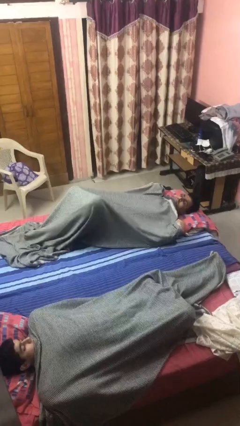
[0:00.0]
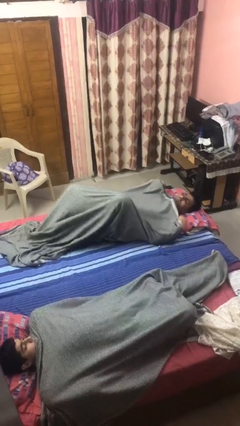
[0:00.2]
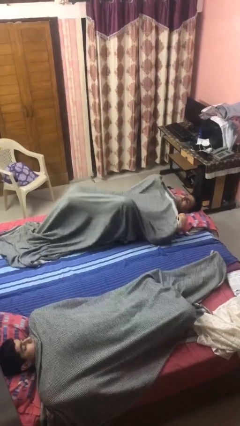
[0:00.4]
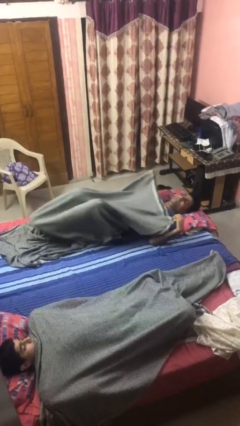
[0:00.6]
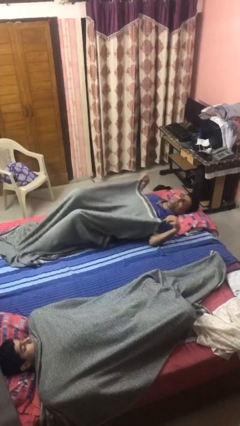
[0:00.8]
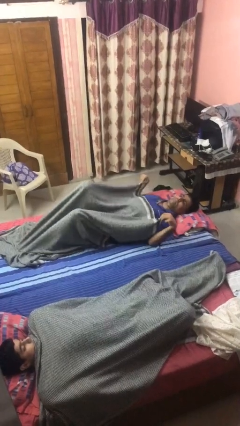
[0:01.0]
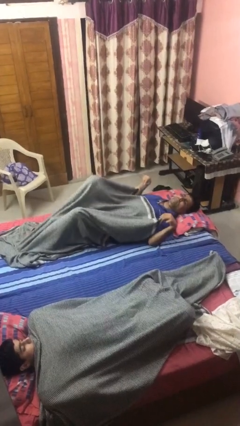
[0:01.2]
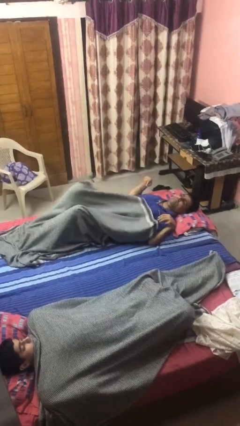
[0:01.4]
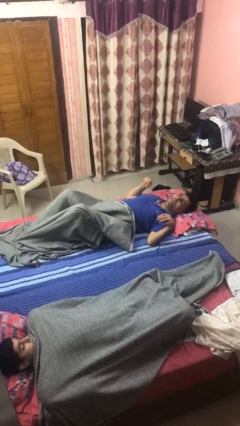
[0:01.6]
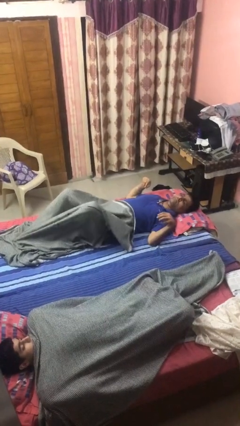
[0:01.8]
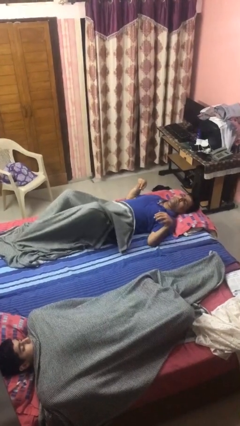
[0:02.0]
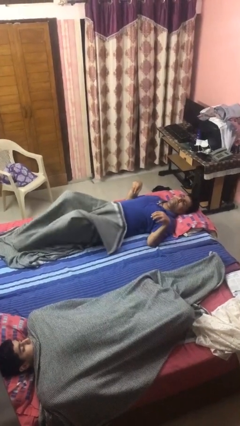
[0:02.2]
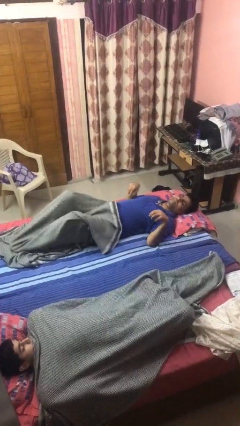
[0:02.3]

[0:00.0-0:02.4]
person uncovers with bedsheets

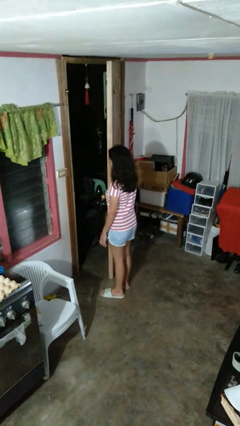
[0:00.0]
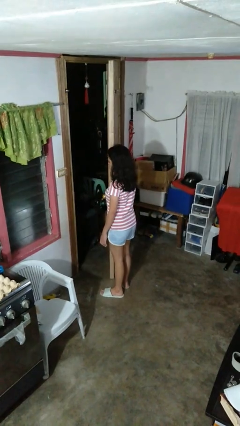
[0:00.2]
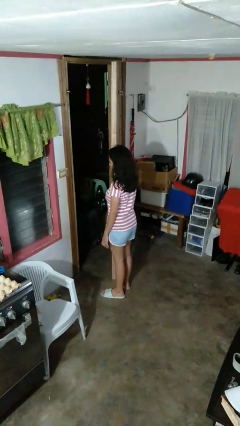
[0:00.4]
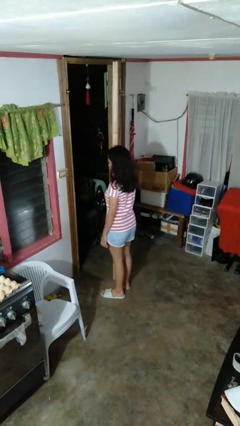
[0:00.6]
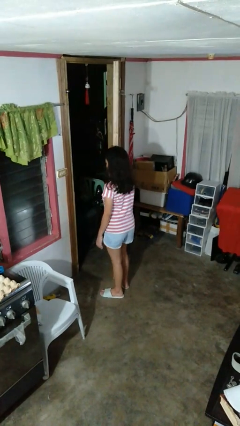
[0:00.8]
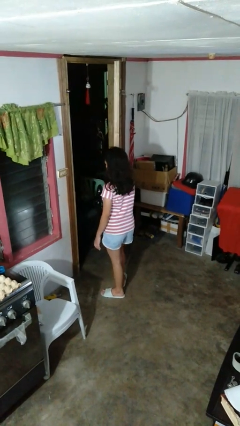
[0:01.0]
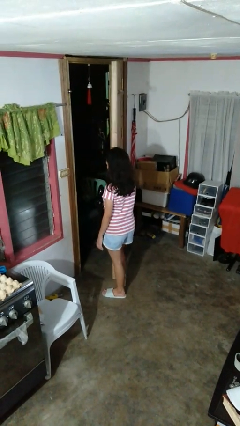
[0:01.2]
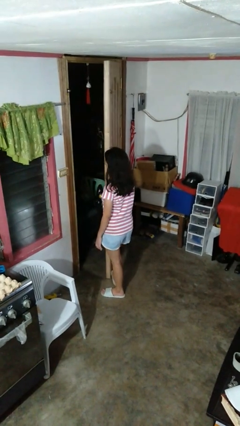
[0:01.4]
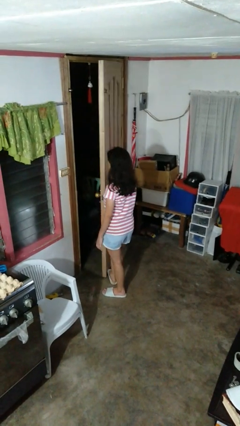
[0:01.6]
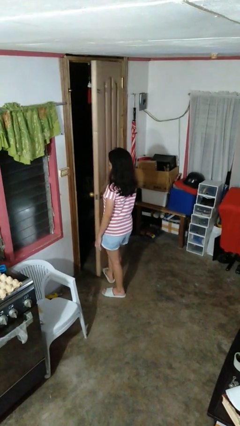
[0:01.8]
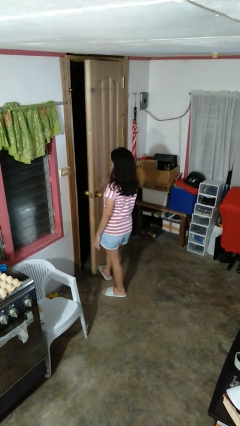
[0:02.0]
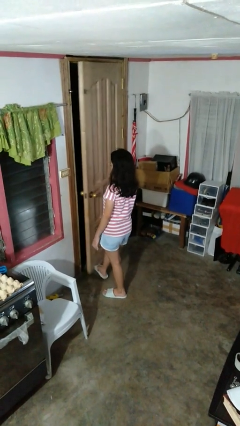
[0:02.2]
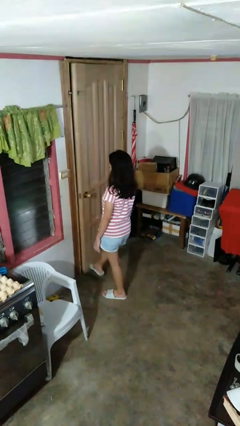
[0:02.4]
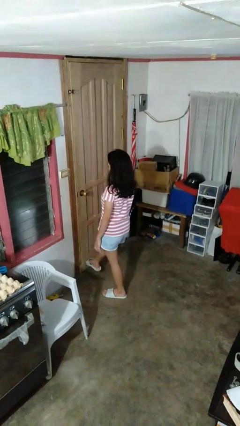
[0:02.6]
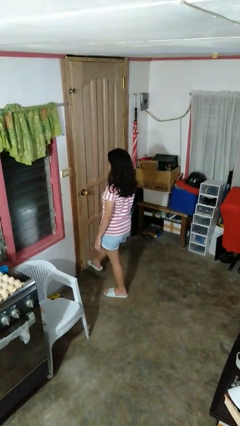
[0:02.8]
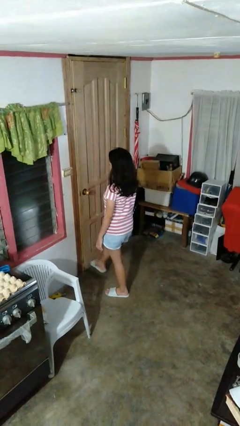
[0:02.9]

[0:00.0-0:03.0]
person closes door with foot

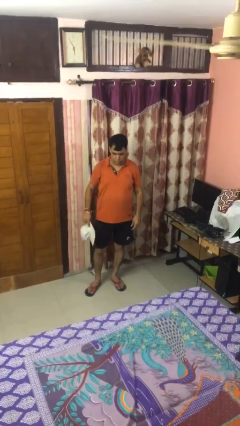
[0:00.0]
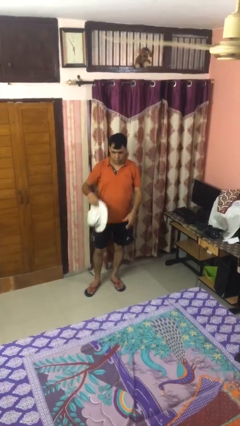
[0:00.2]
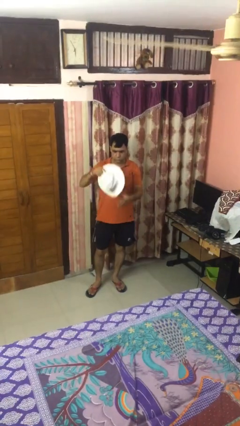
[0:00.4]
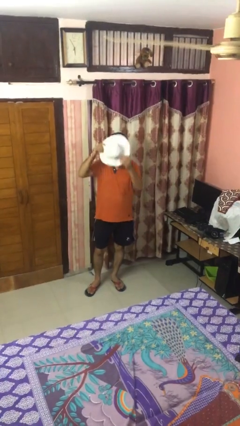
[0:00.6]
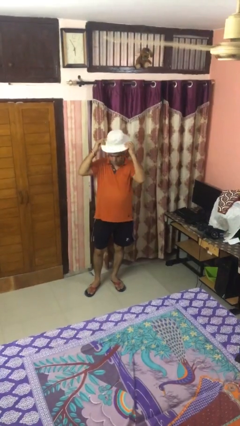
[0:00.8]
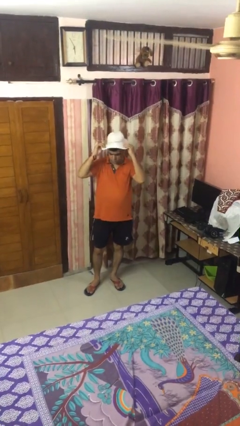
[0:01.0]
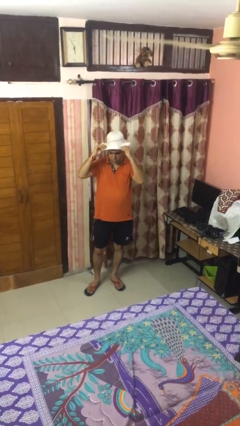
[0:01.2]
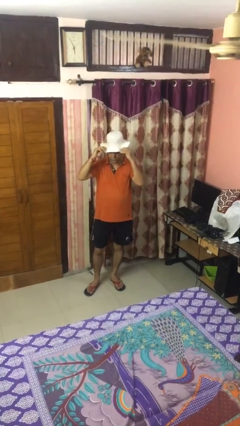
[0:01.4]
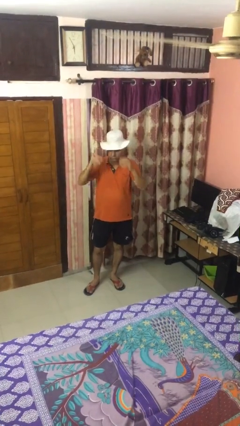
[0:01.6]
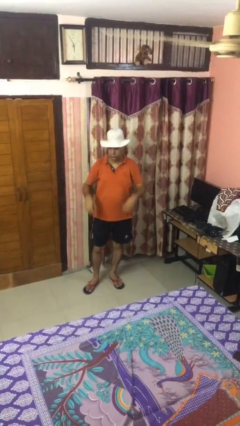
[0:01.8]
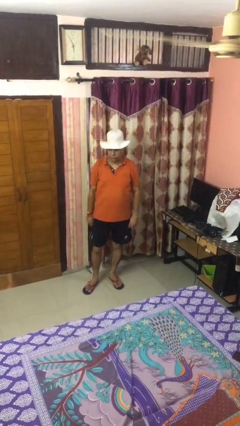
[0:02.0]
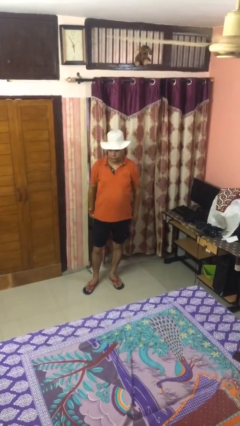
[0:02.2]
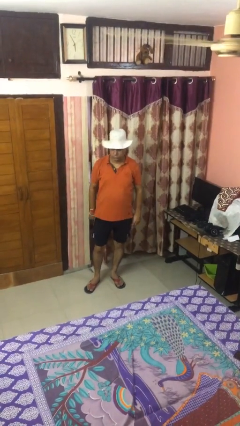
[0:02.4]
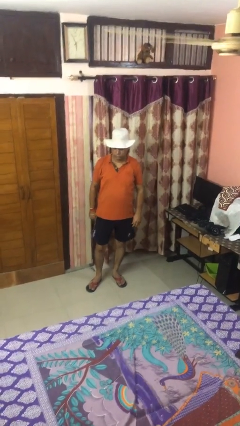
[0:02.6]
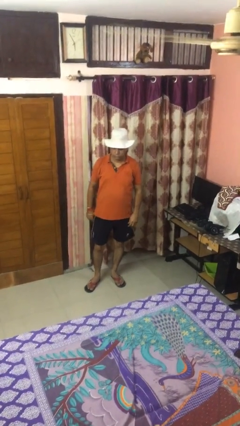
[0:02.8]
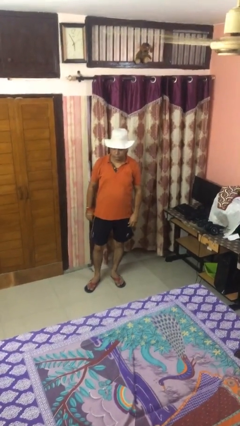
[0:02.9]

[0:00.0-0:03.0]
person puts on hat

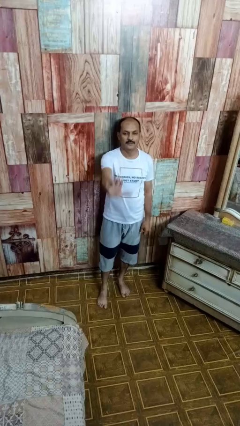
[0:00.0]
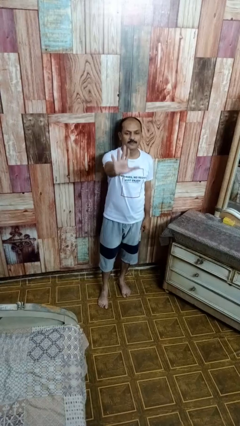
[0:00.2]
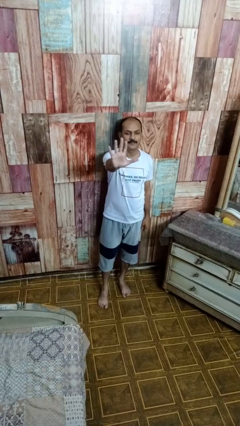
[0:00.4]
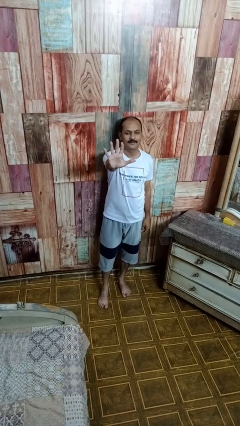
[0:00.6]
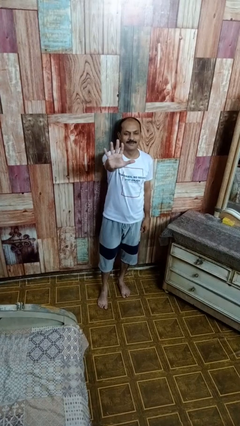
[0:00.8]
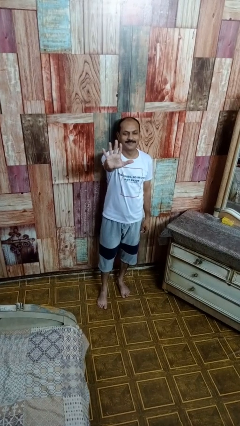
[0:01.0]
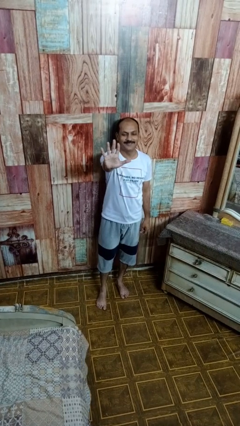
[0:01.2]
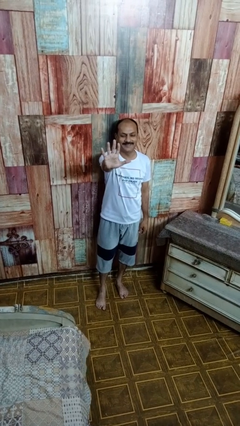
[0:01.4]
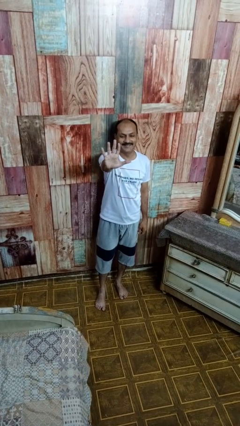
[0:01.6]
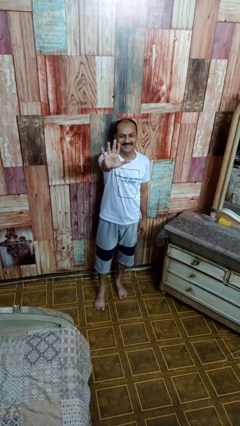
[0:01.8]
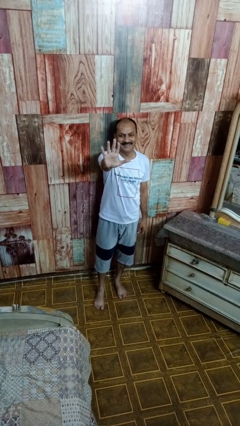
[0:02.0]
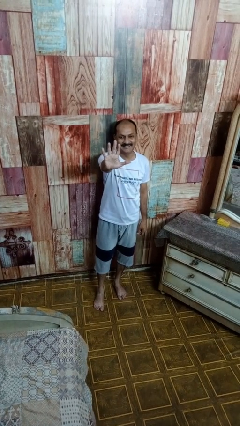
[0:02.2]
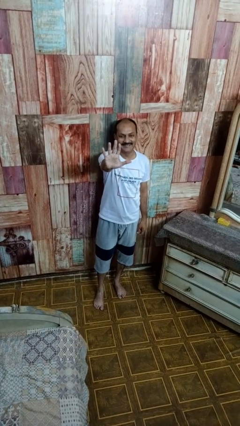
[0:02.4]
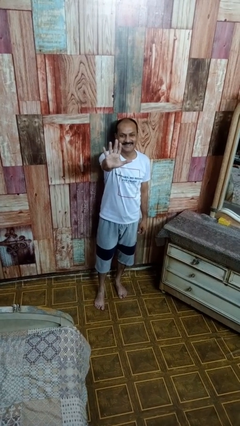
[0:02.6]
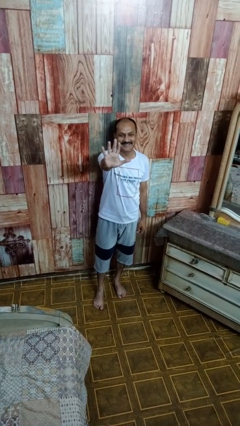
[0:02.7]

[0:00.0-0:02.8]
person gestures number five

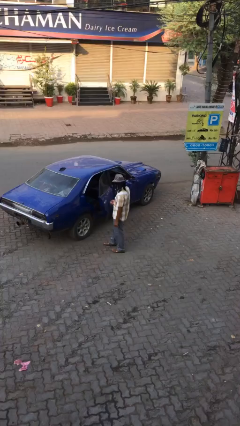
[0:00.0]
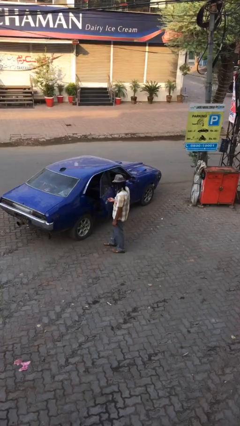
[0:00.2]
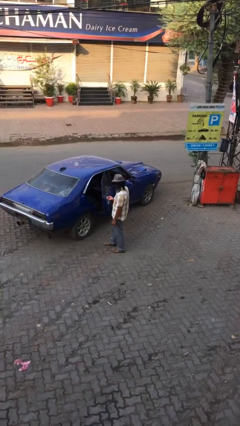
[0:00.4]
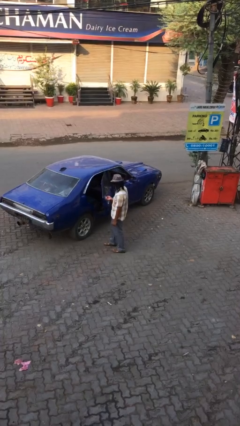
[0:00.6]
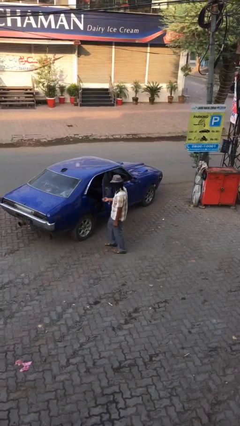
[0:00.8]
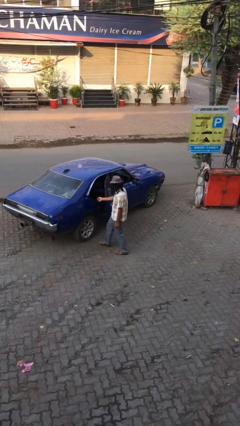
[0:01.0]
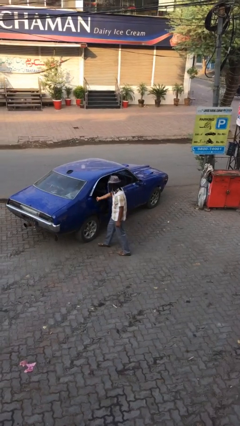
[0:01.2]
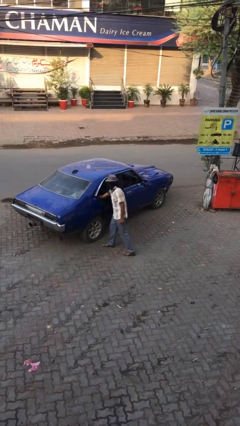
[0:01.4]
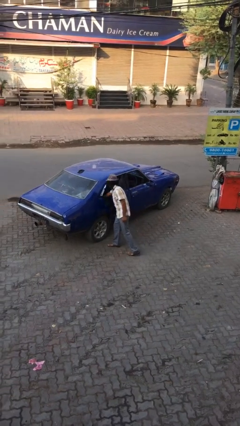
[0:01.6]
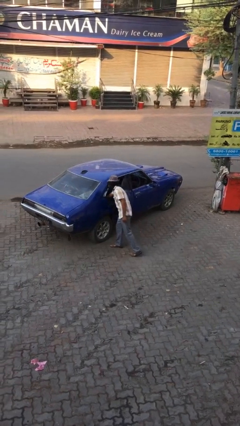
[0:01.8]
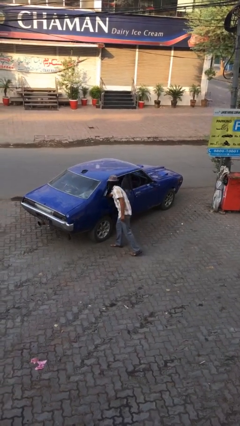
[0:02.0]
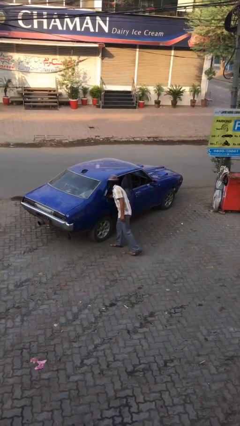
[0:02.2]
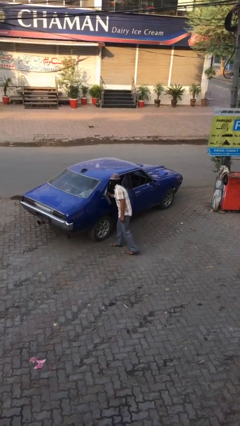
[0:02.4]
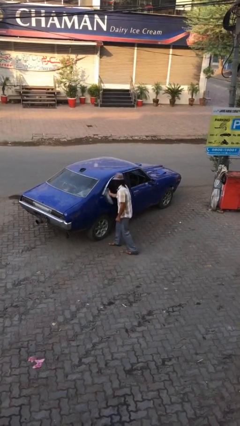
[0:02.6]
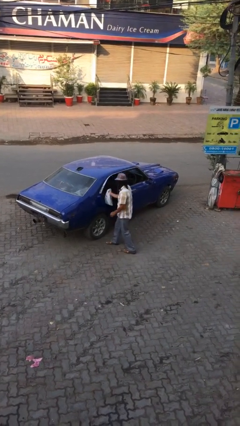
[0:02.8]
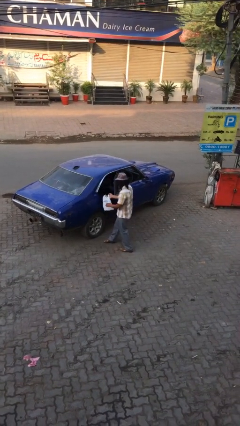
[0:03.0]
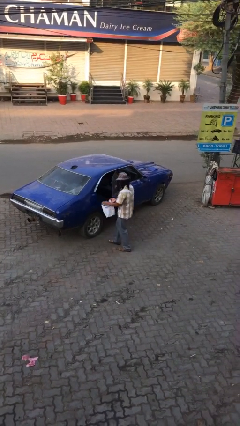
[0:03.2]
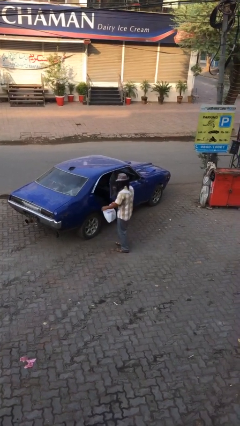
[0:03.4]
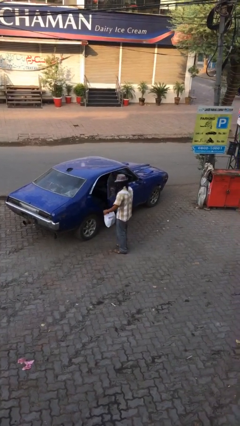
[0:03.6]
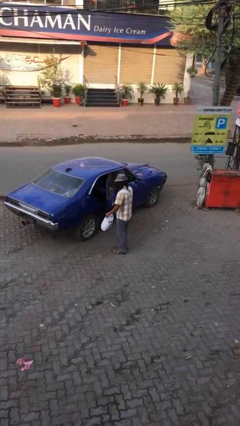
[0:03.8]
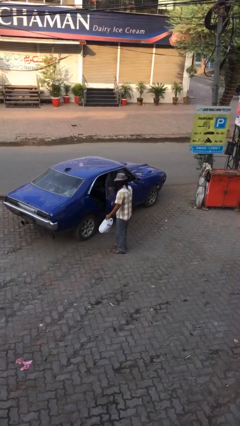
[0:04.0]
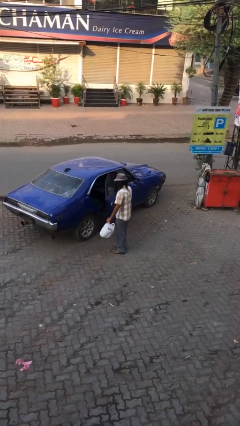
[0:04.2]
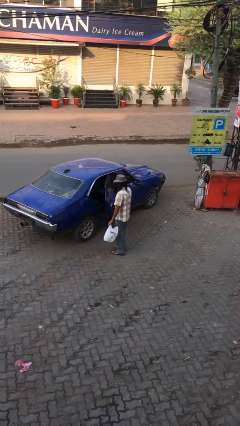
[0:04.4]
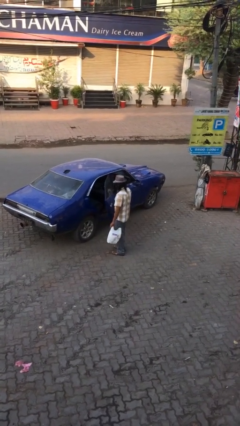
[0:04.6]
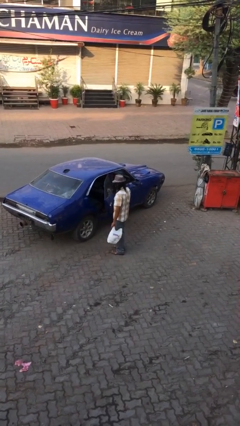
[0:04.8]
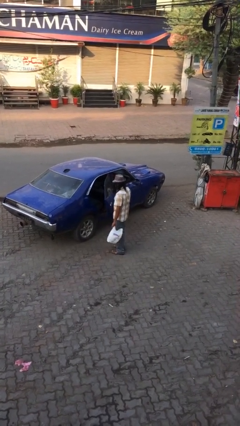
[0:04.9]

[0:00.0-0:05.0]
person unloads car

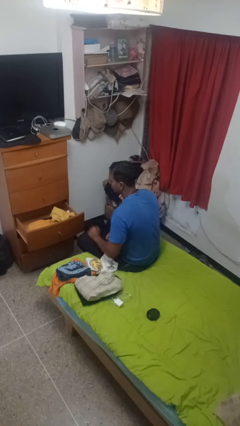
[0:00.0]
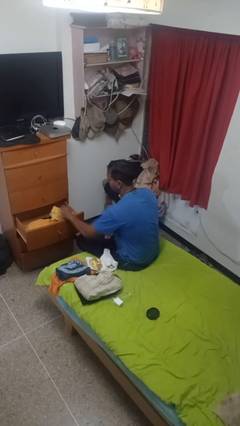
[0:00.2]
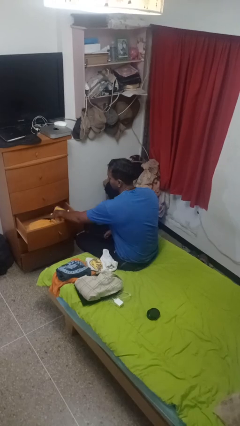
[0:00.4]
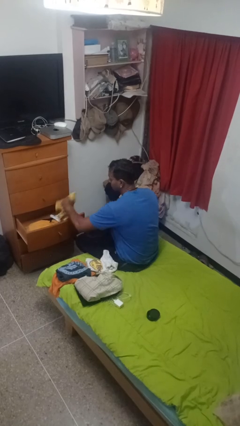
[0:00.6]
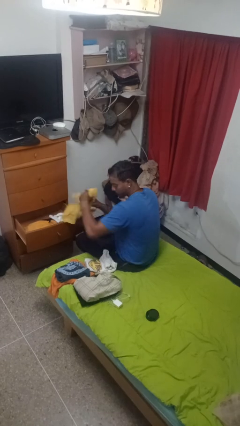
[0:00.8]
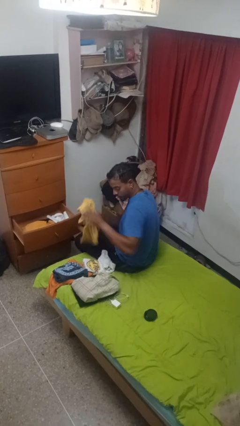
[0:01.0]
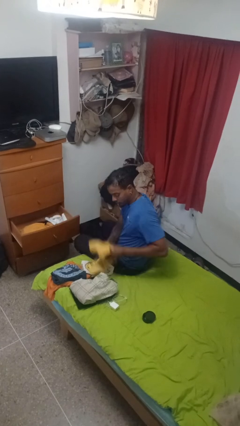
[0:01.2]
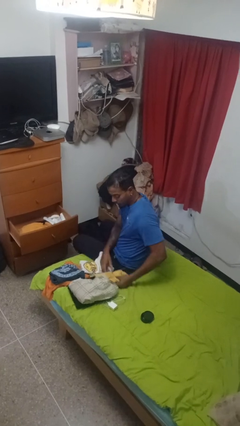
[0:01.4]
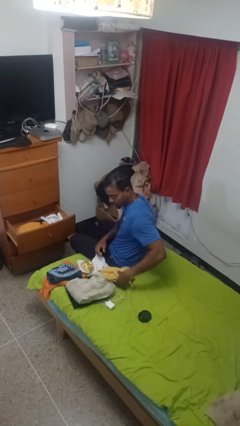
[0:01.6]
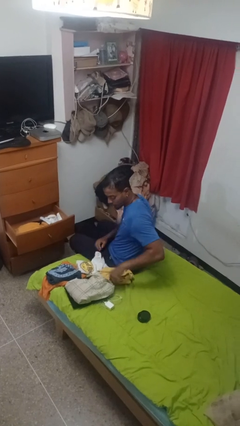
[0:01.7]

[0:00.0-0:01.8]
person takes clothes from dresser
